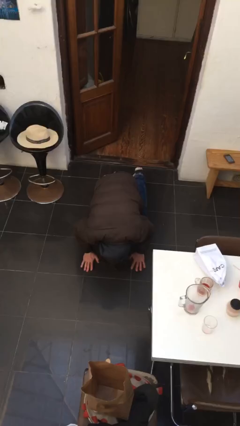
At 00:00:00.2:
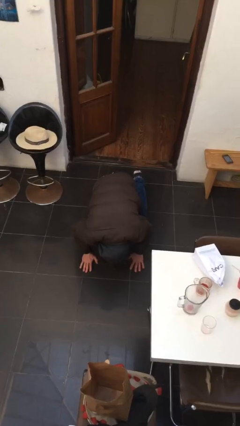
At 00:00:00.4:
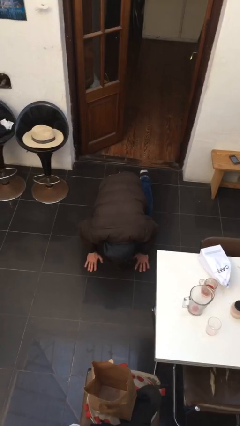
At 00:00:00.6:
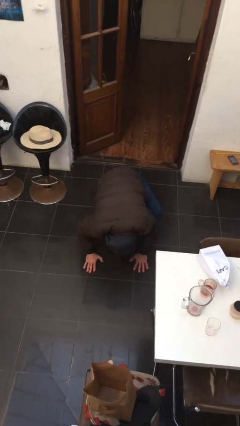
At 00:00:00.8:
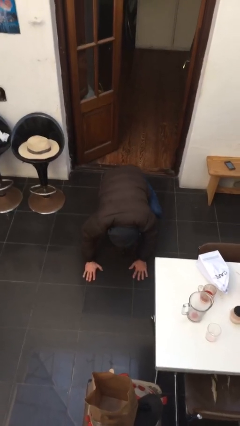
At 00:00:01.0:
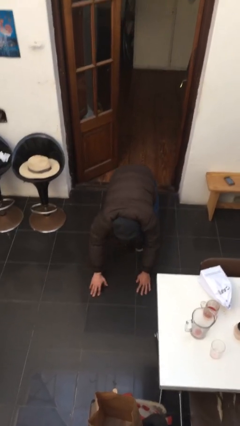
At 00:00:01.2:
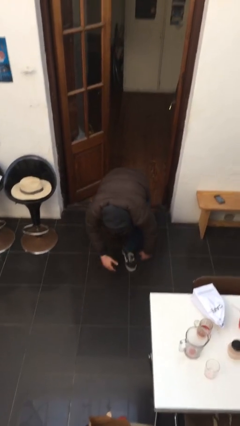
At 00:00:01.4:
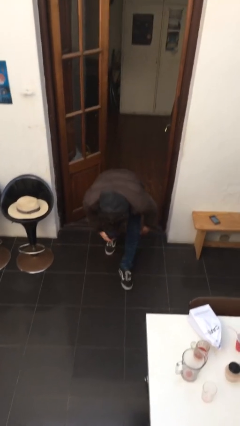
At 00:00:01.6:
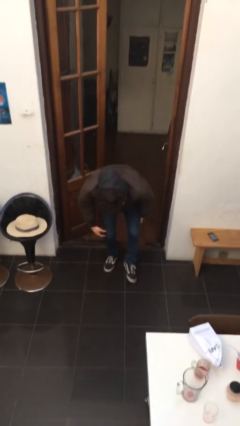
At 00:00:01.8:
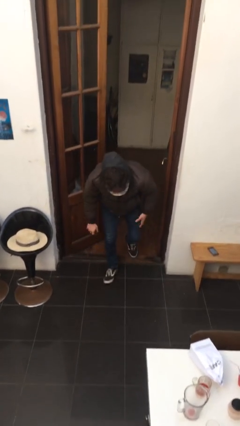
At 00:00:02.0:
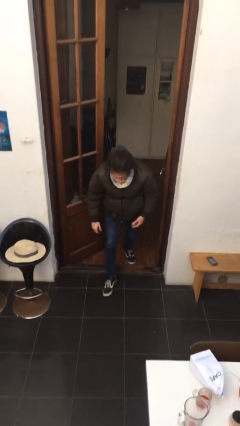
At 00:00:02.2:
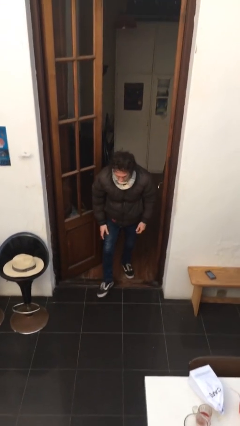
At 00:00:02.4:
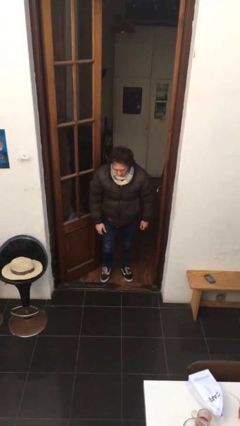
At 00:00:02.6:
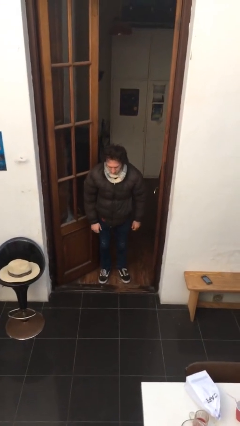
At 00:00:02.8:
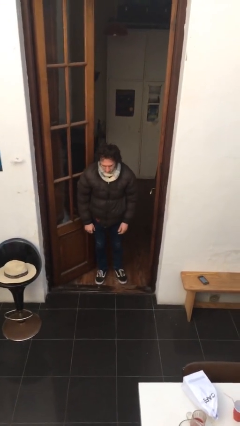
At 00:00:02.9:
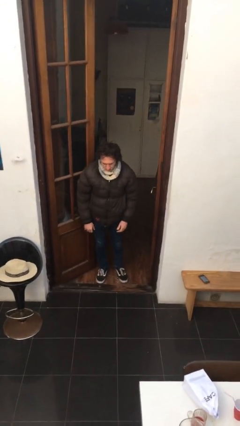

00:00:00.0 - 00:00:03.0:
person stands up from floor

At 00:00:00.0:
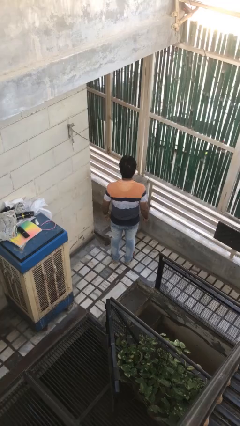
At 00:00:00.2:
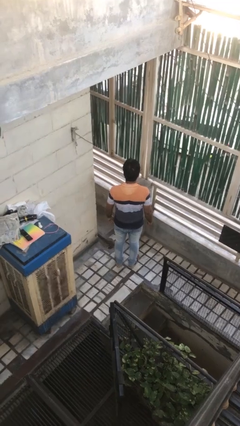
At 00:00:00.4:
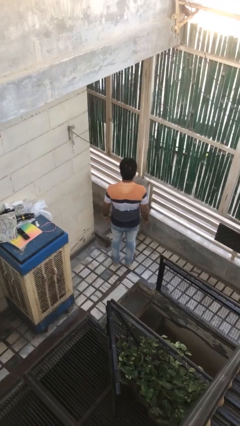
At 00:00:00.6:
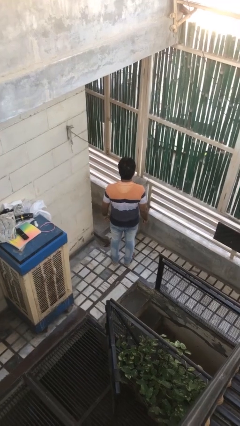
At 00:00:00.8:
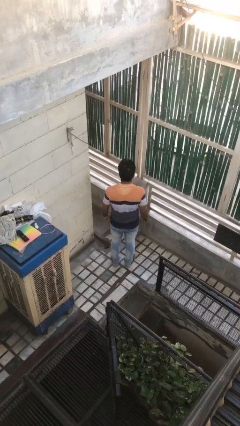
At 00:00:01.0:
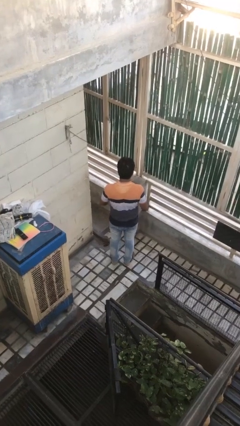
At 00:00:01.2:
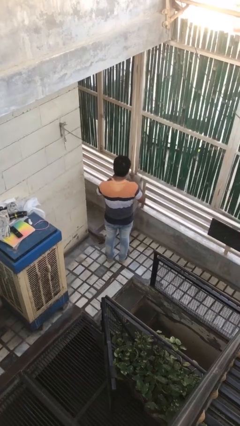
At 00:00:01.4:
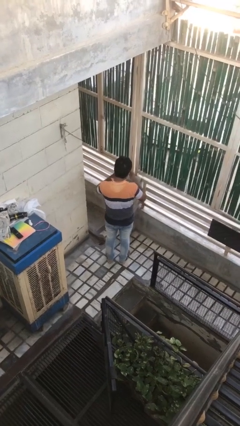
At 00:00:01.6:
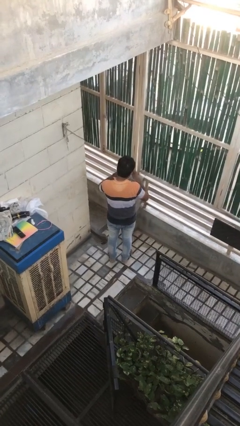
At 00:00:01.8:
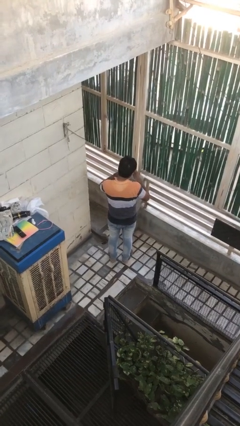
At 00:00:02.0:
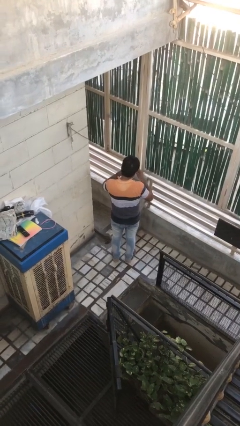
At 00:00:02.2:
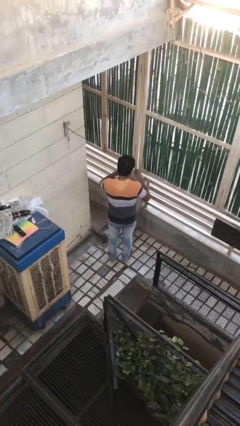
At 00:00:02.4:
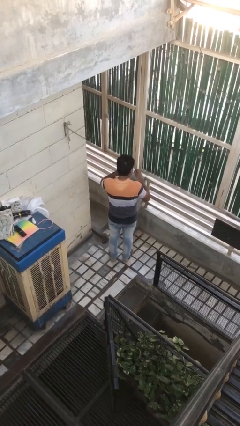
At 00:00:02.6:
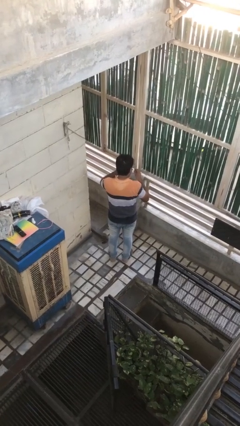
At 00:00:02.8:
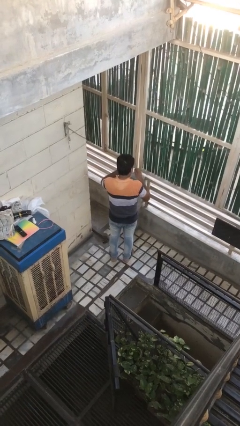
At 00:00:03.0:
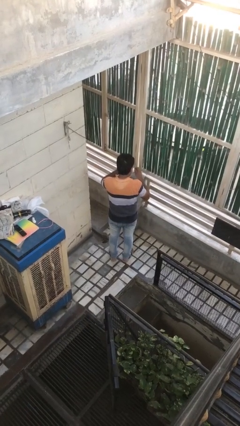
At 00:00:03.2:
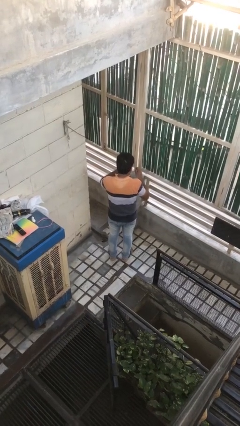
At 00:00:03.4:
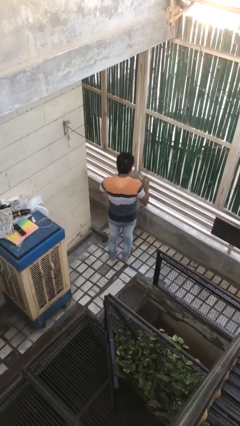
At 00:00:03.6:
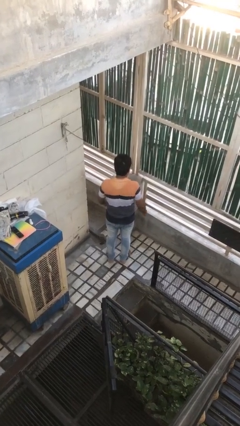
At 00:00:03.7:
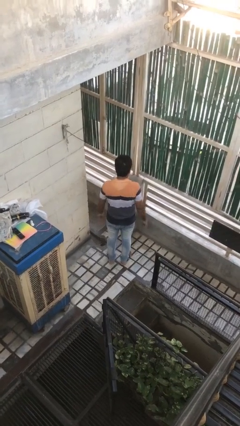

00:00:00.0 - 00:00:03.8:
person files fingernails

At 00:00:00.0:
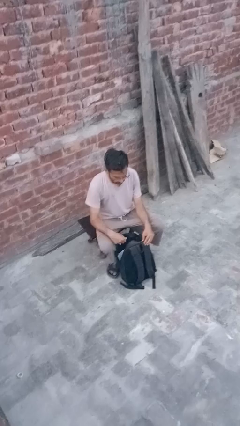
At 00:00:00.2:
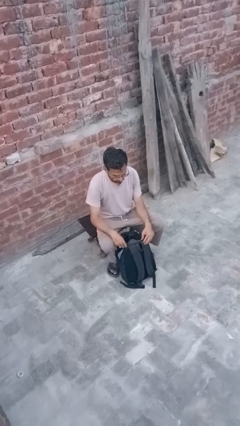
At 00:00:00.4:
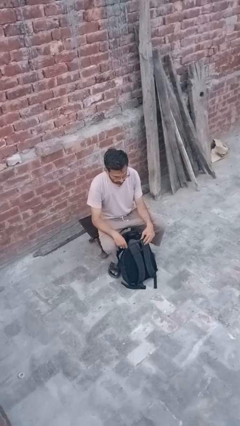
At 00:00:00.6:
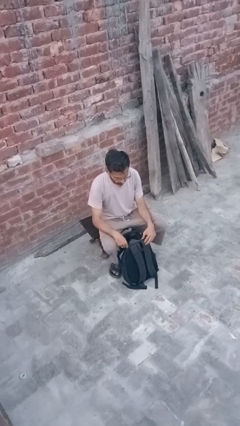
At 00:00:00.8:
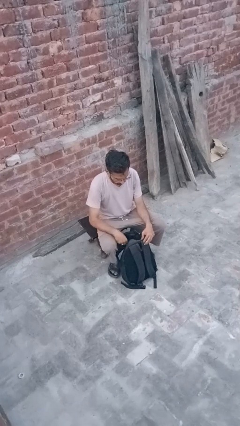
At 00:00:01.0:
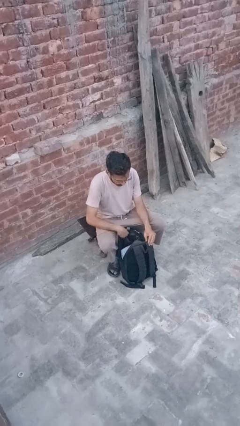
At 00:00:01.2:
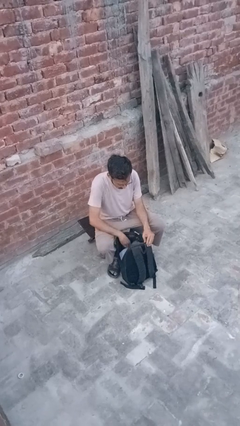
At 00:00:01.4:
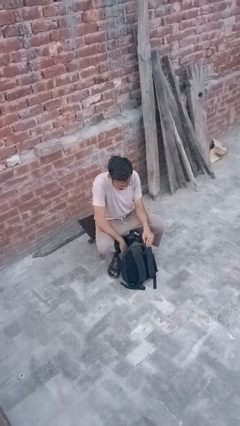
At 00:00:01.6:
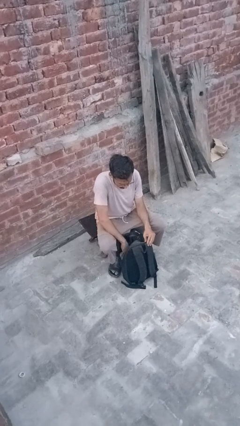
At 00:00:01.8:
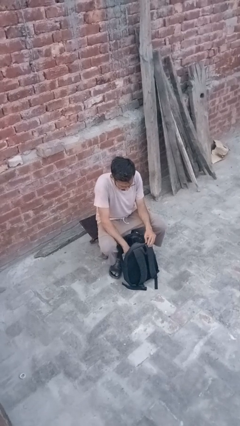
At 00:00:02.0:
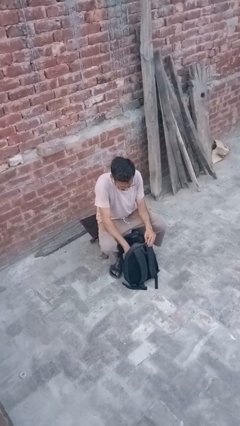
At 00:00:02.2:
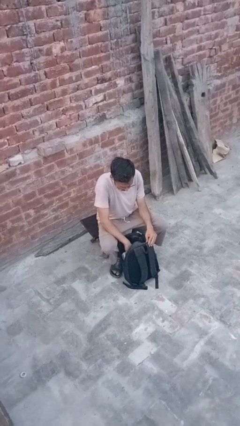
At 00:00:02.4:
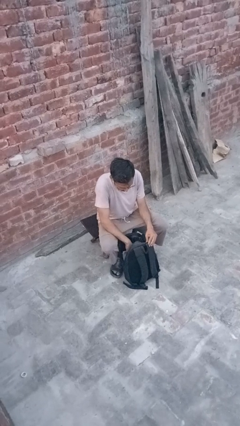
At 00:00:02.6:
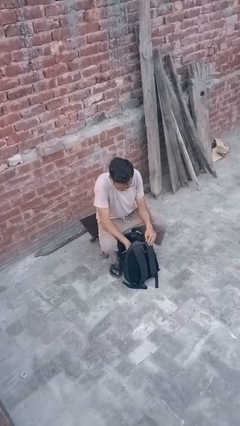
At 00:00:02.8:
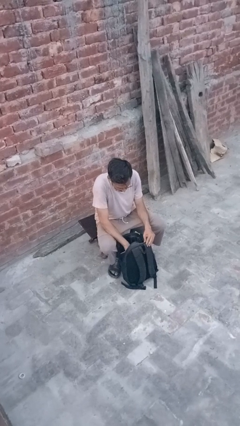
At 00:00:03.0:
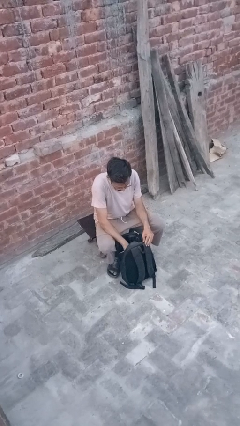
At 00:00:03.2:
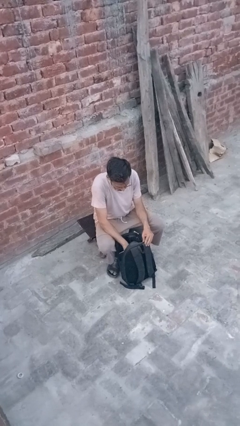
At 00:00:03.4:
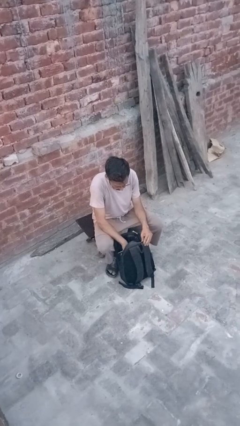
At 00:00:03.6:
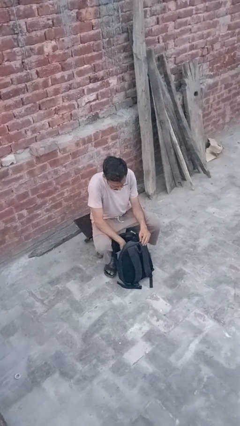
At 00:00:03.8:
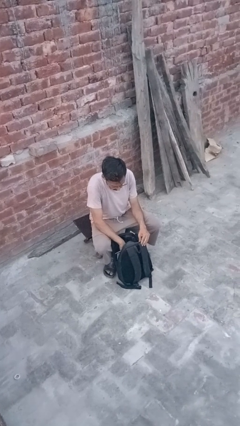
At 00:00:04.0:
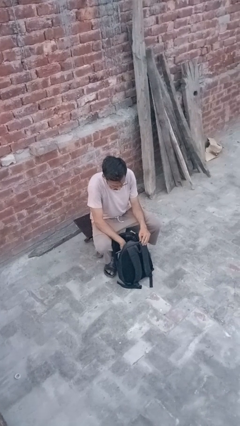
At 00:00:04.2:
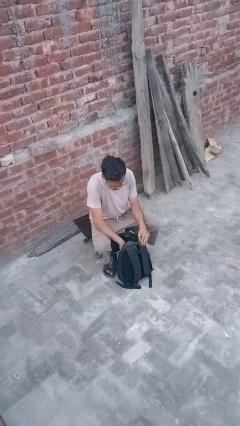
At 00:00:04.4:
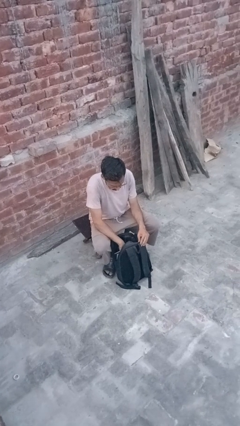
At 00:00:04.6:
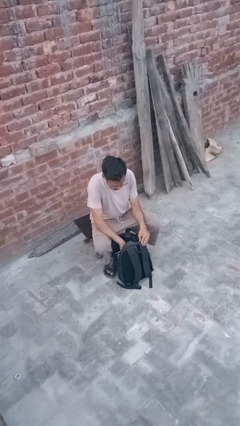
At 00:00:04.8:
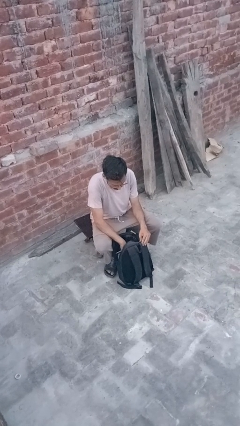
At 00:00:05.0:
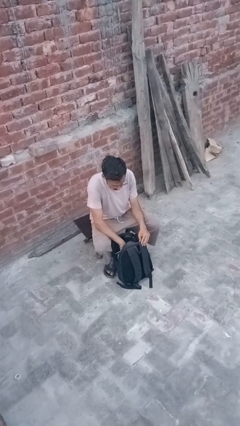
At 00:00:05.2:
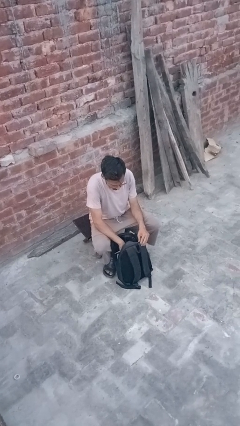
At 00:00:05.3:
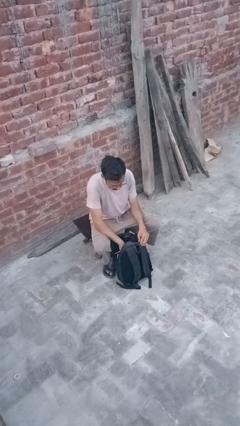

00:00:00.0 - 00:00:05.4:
person searches in backpack

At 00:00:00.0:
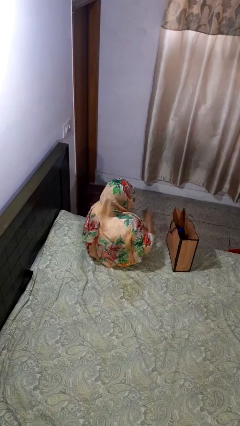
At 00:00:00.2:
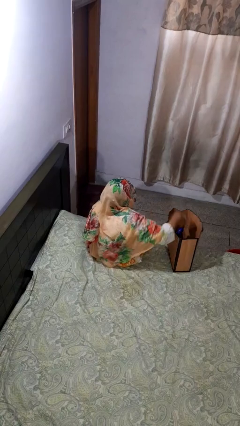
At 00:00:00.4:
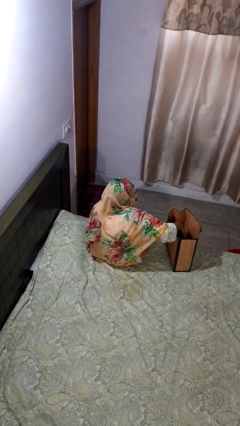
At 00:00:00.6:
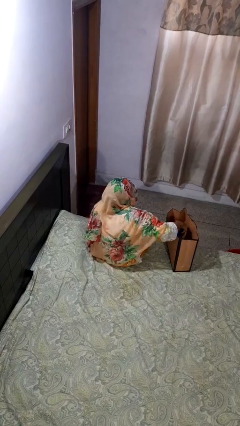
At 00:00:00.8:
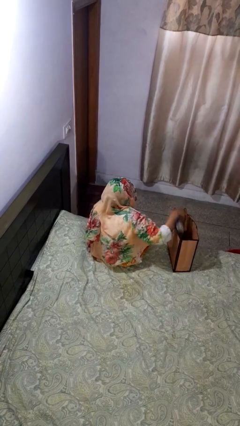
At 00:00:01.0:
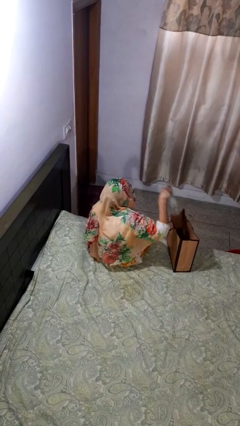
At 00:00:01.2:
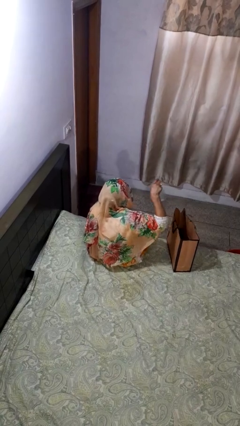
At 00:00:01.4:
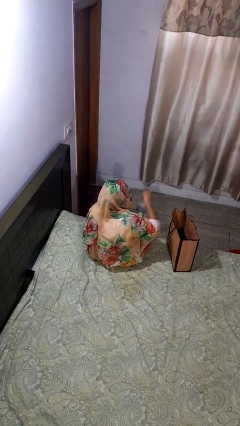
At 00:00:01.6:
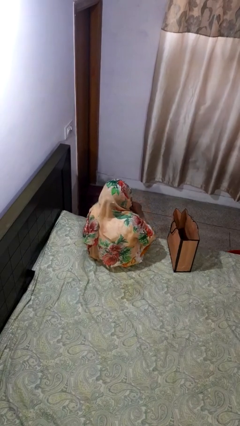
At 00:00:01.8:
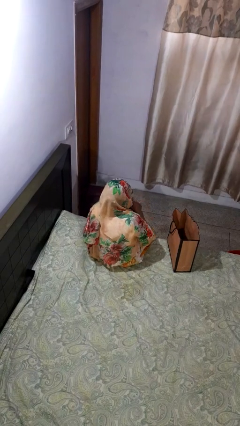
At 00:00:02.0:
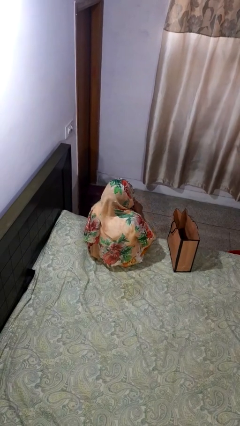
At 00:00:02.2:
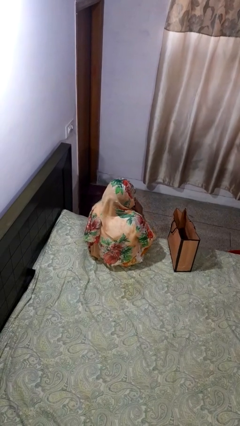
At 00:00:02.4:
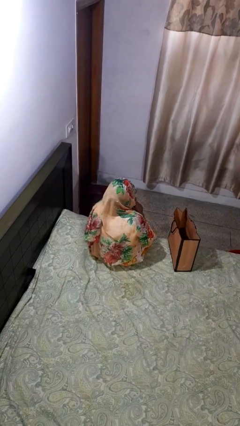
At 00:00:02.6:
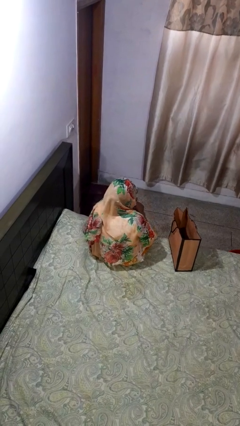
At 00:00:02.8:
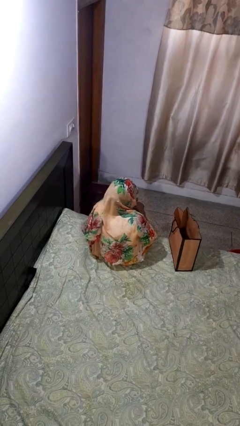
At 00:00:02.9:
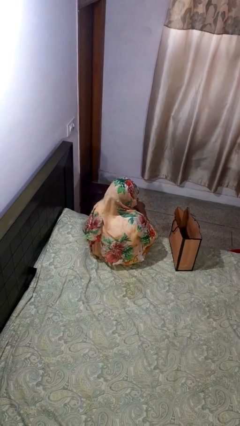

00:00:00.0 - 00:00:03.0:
person takes object from bag

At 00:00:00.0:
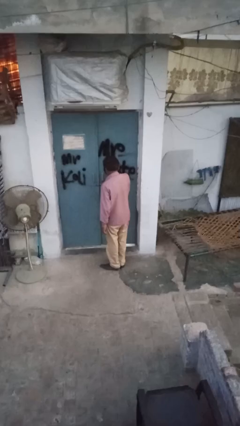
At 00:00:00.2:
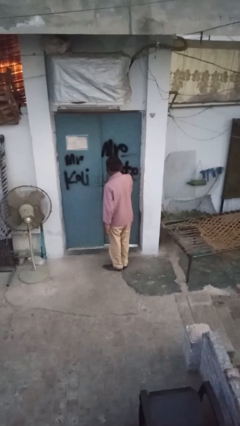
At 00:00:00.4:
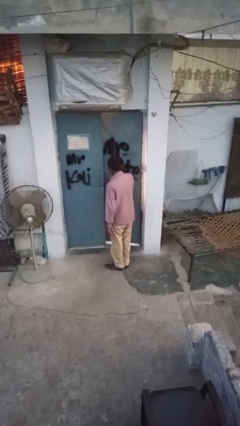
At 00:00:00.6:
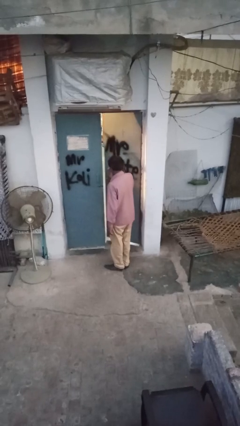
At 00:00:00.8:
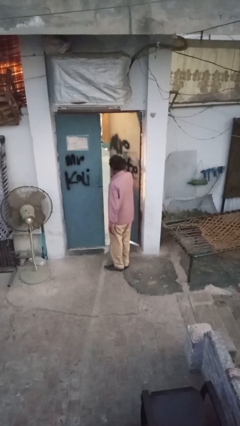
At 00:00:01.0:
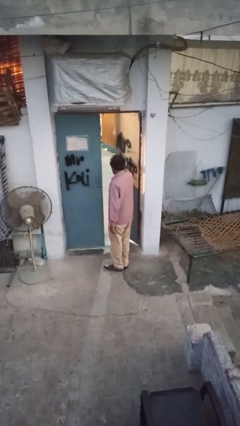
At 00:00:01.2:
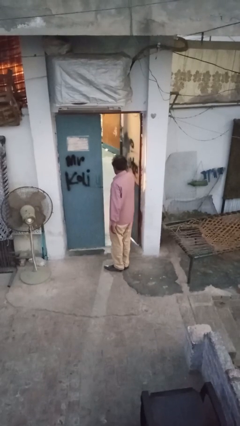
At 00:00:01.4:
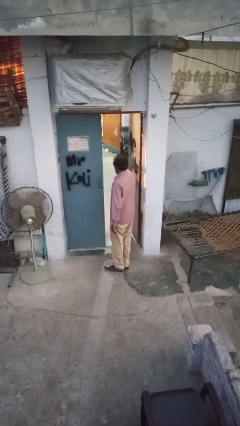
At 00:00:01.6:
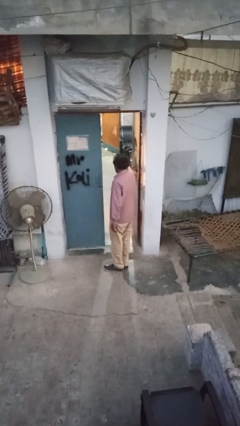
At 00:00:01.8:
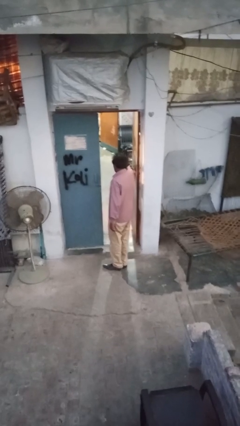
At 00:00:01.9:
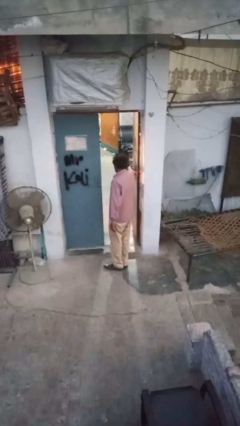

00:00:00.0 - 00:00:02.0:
person opens facility door
